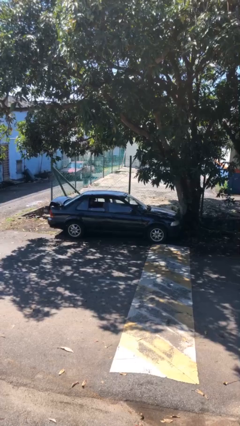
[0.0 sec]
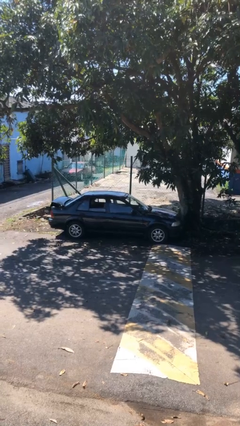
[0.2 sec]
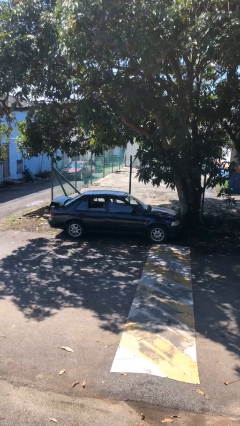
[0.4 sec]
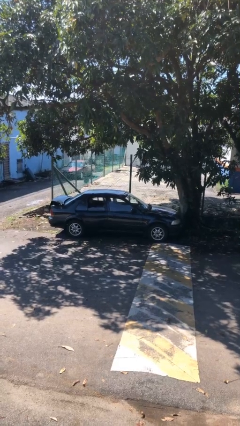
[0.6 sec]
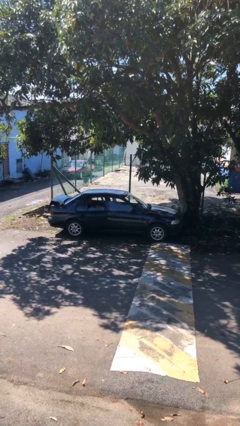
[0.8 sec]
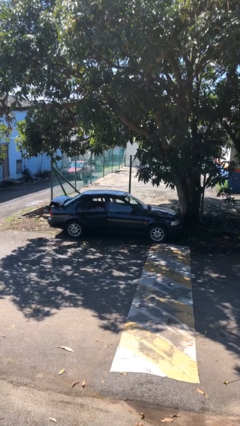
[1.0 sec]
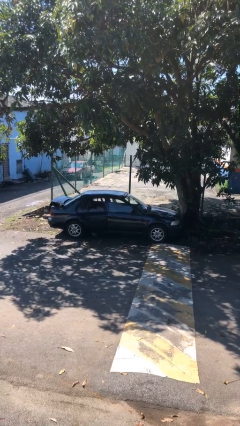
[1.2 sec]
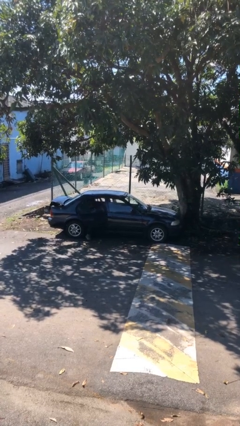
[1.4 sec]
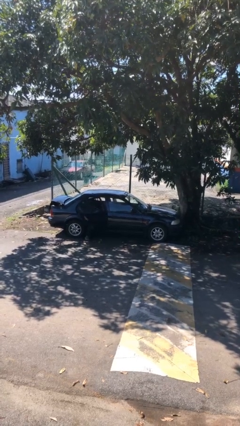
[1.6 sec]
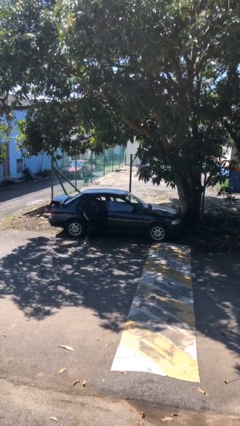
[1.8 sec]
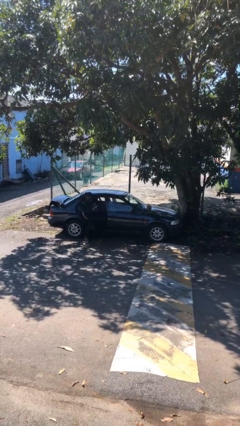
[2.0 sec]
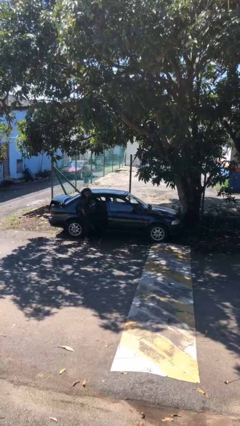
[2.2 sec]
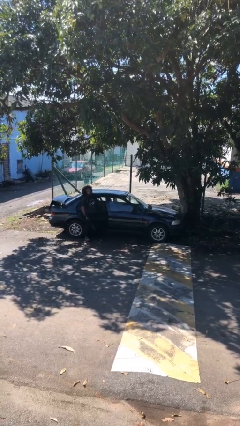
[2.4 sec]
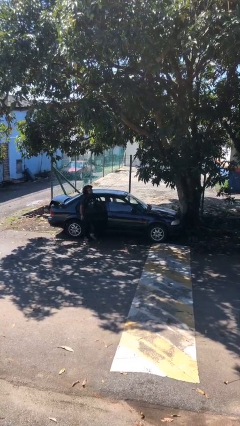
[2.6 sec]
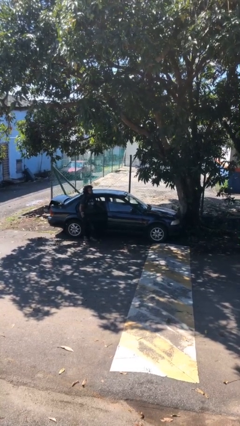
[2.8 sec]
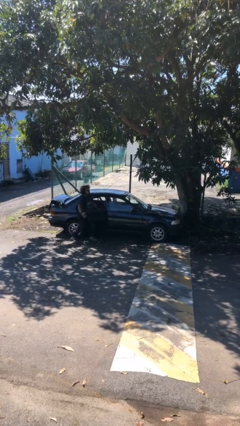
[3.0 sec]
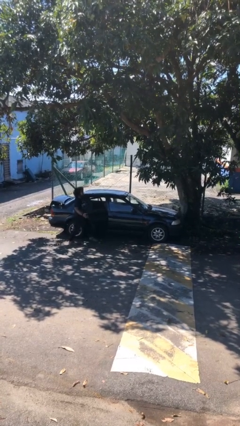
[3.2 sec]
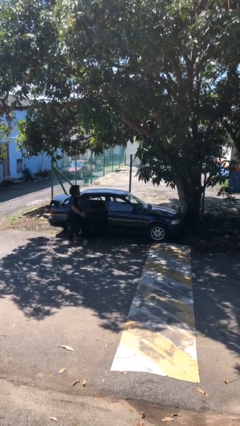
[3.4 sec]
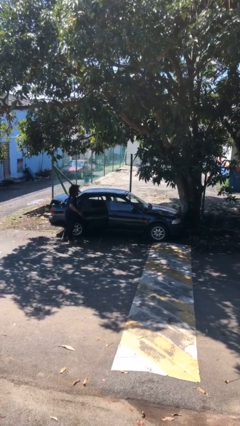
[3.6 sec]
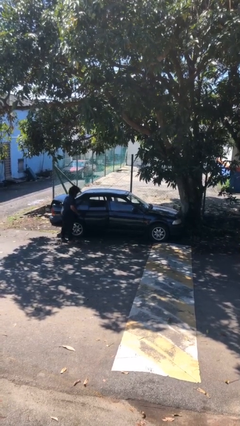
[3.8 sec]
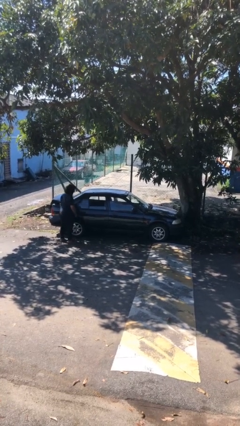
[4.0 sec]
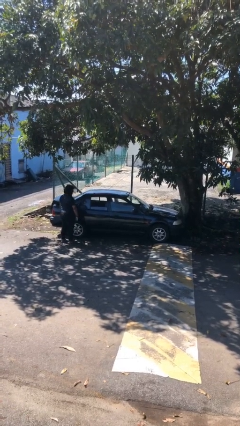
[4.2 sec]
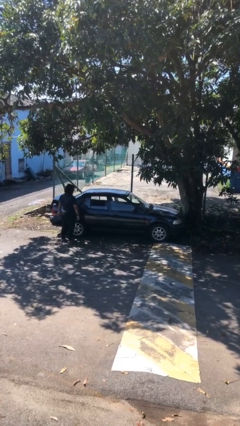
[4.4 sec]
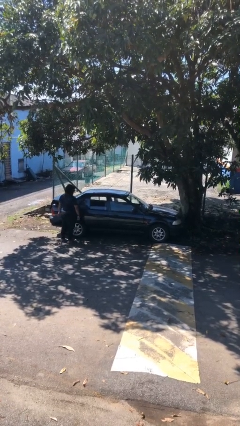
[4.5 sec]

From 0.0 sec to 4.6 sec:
car drops off person

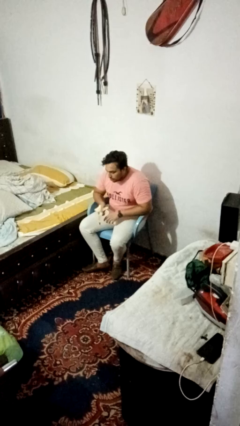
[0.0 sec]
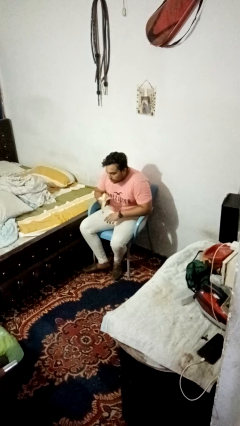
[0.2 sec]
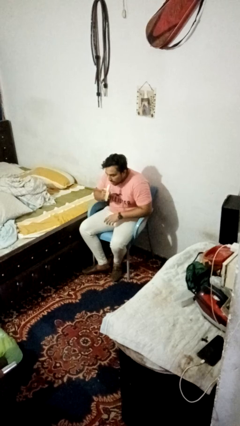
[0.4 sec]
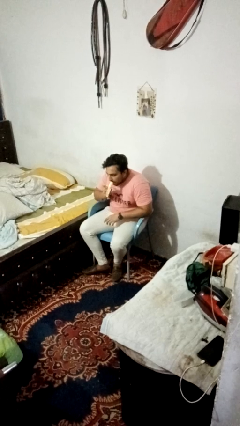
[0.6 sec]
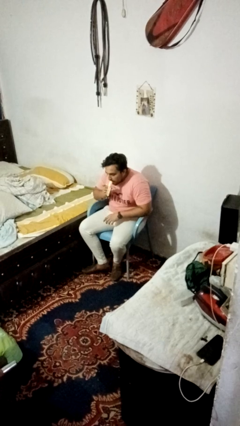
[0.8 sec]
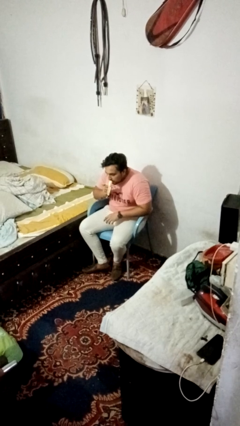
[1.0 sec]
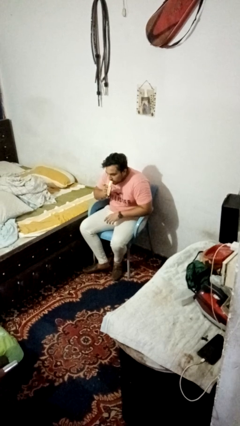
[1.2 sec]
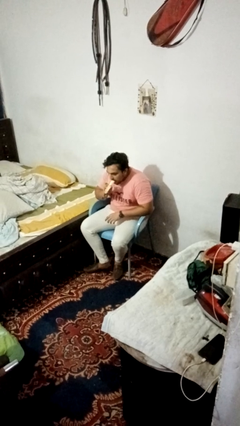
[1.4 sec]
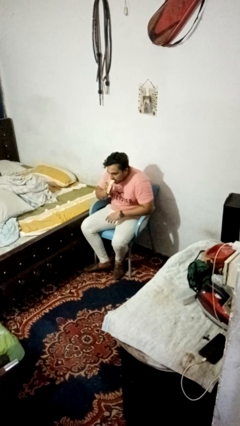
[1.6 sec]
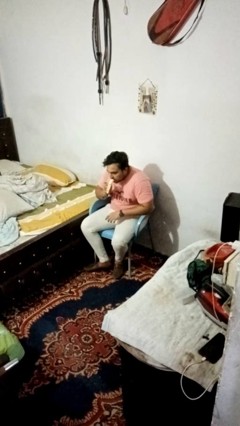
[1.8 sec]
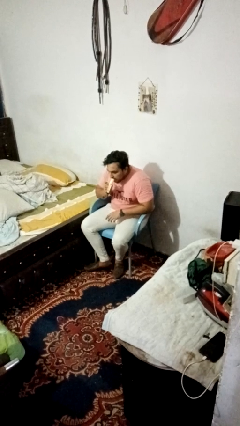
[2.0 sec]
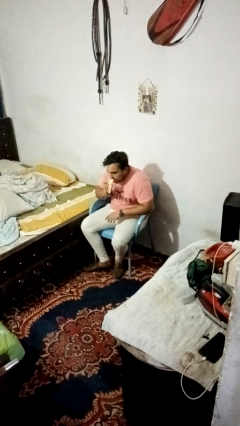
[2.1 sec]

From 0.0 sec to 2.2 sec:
person eats banana

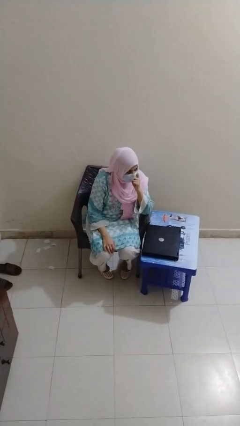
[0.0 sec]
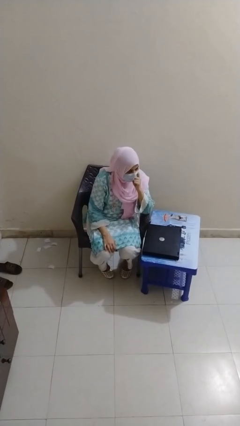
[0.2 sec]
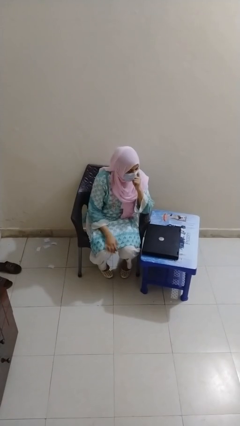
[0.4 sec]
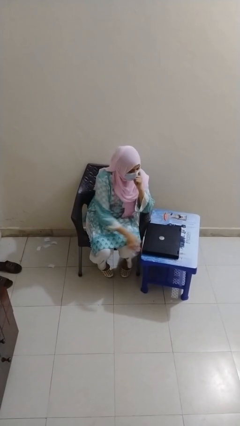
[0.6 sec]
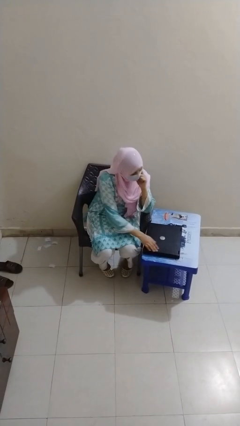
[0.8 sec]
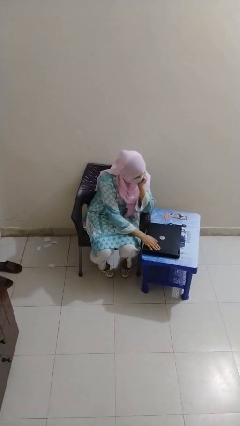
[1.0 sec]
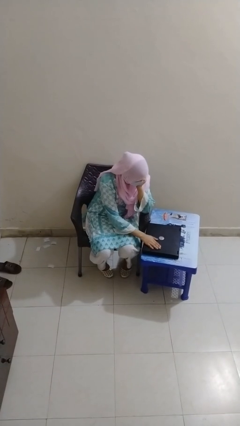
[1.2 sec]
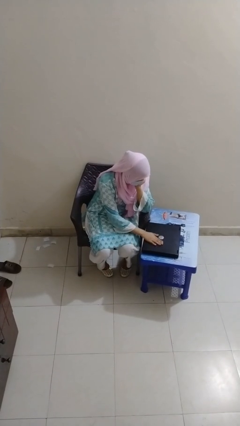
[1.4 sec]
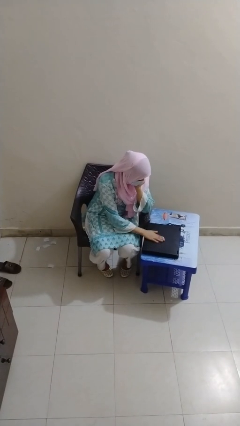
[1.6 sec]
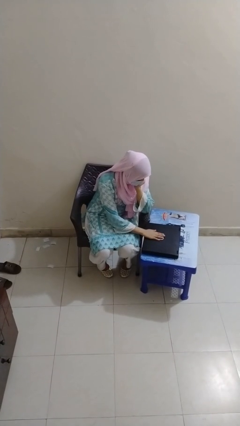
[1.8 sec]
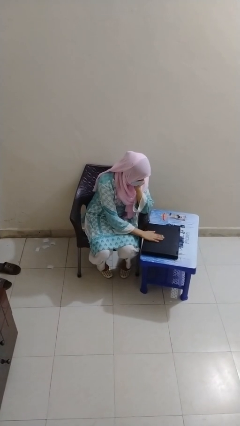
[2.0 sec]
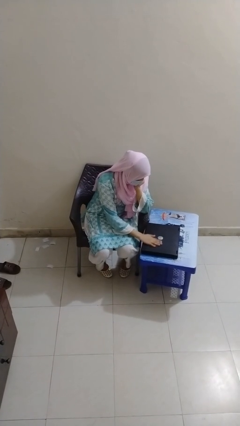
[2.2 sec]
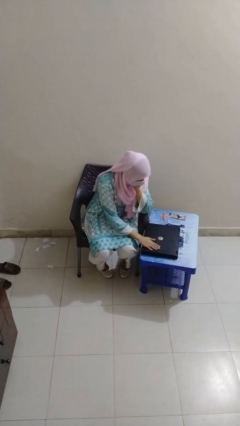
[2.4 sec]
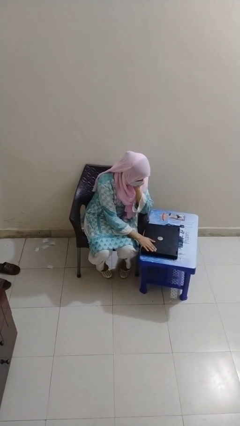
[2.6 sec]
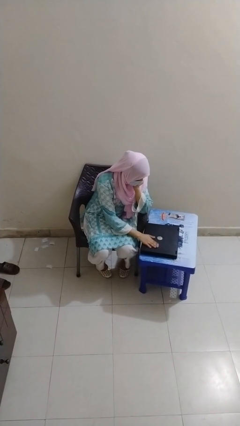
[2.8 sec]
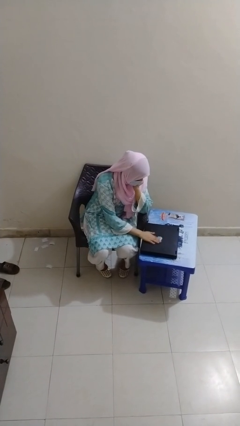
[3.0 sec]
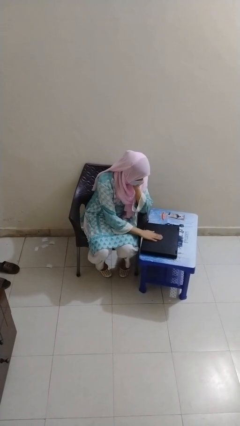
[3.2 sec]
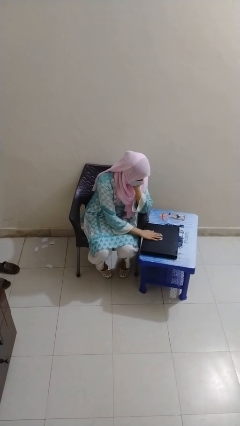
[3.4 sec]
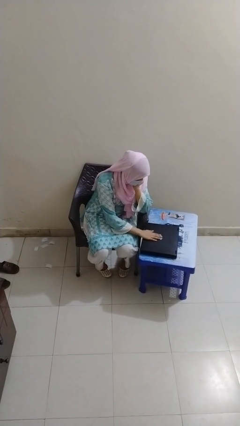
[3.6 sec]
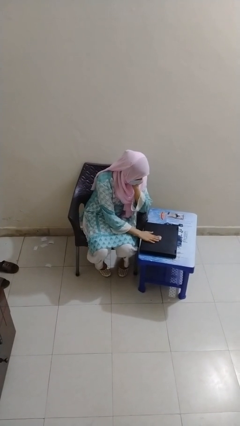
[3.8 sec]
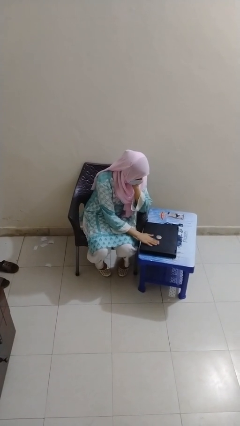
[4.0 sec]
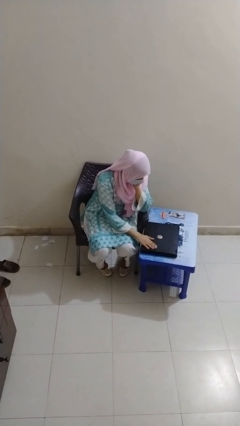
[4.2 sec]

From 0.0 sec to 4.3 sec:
person waves hand over object

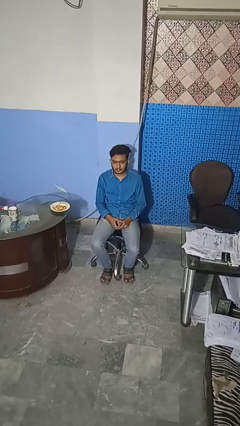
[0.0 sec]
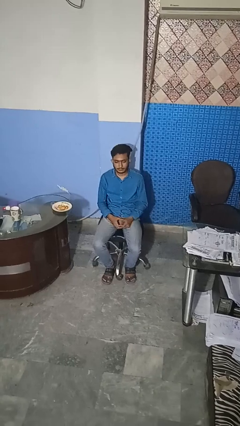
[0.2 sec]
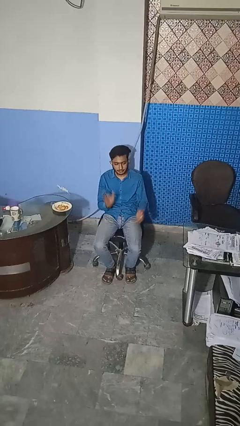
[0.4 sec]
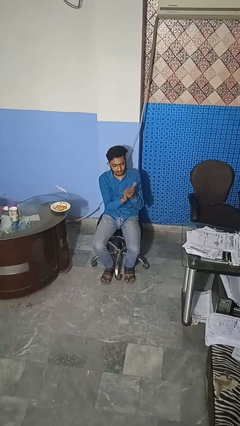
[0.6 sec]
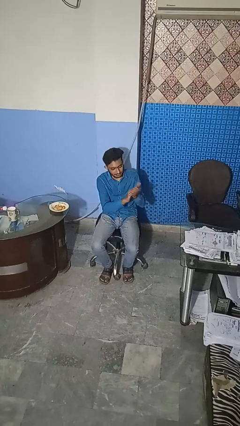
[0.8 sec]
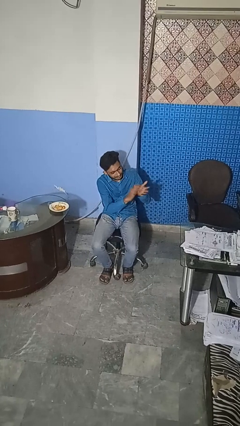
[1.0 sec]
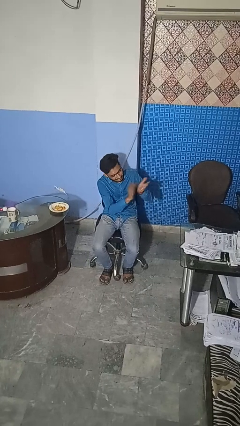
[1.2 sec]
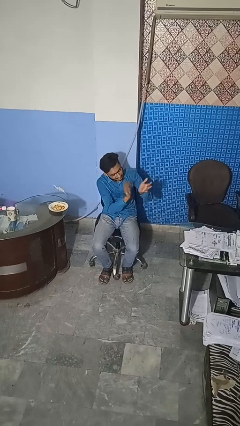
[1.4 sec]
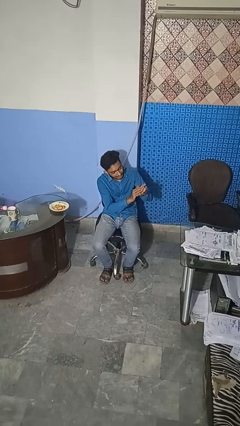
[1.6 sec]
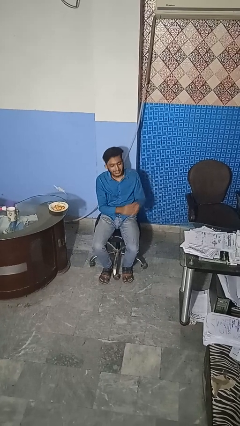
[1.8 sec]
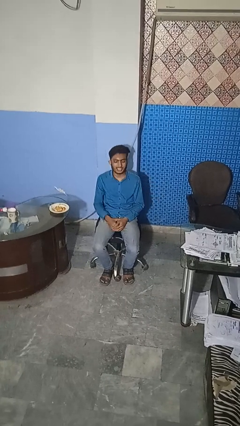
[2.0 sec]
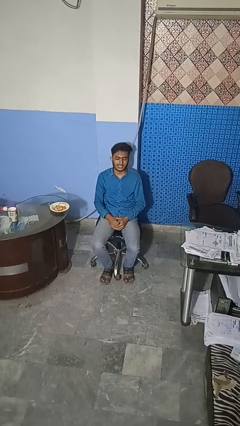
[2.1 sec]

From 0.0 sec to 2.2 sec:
person claps hands

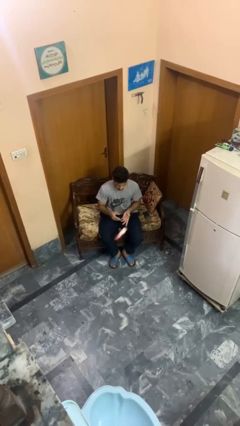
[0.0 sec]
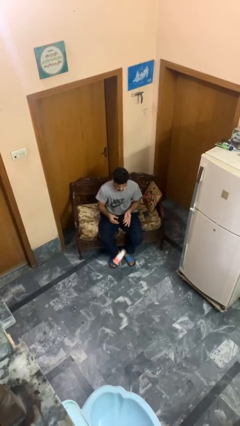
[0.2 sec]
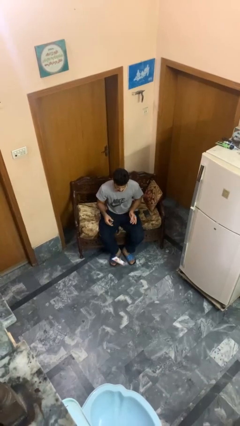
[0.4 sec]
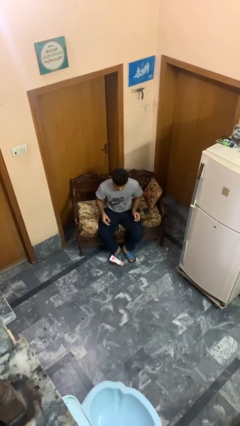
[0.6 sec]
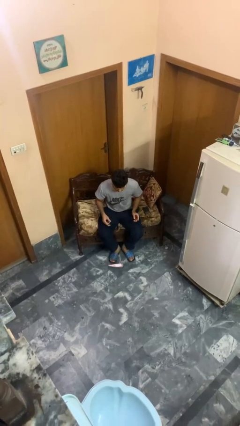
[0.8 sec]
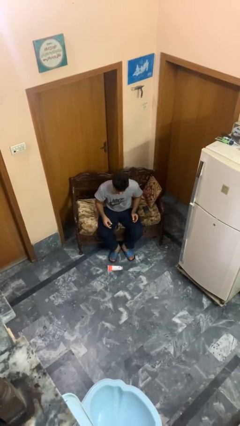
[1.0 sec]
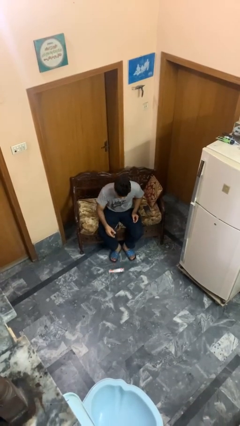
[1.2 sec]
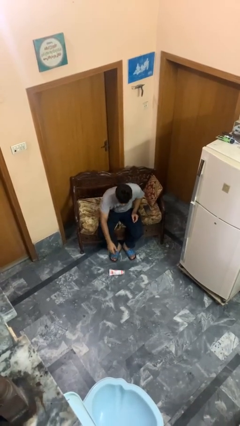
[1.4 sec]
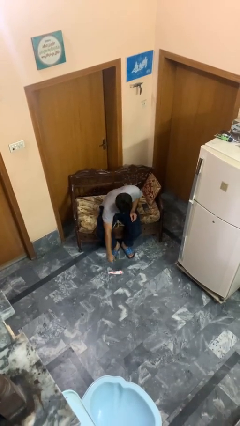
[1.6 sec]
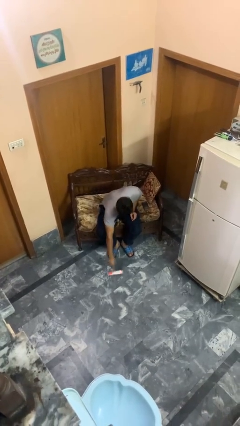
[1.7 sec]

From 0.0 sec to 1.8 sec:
person drops object

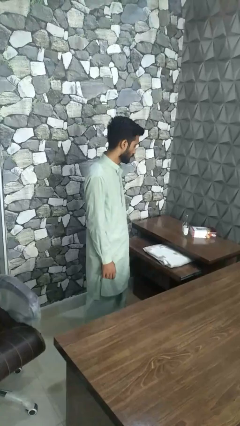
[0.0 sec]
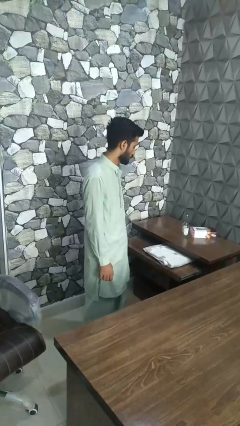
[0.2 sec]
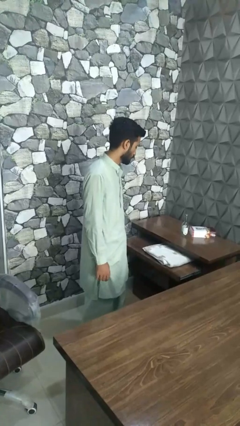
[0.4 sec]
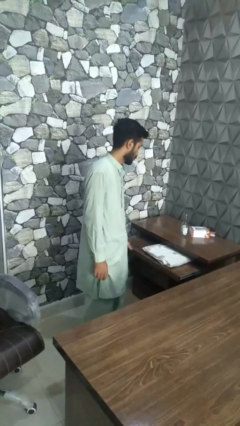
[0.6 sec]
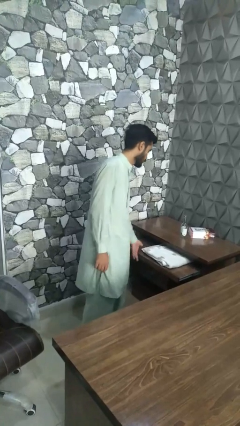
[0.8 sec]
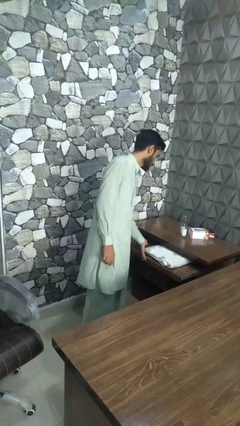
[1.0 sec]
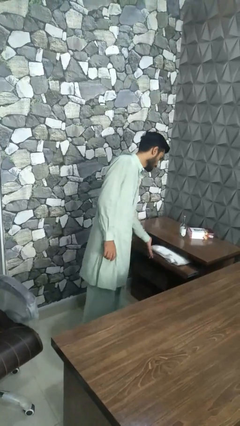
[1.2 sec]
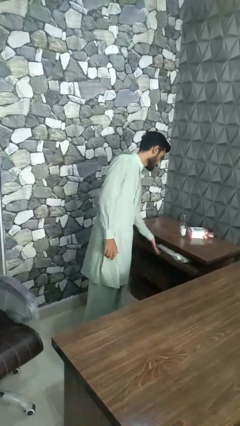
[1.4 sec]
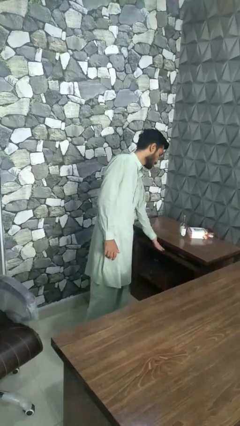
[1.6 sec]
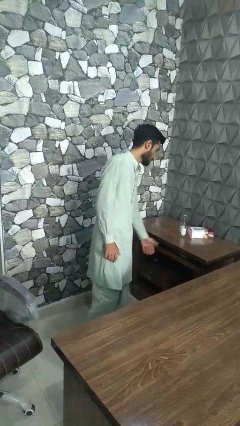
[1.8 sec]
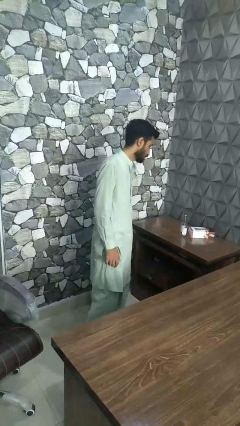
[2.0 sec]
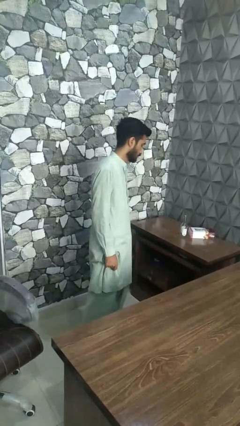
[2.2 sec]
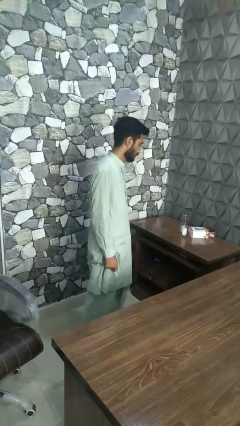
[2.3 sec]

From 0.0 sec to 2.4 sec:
person closes dresser drawer
